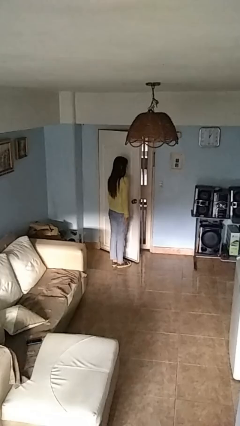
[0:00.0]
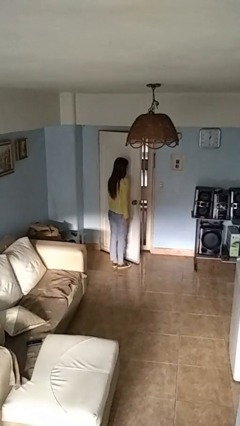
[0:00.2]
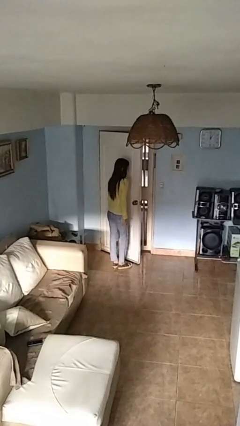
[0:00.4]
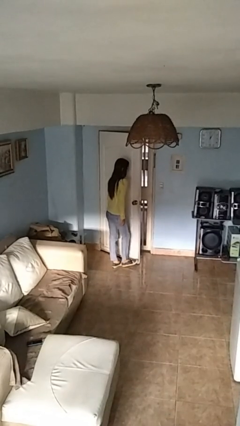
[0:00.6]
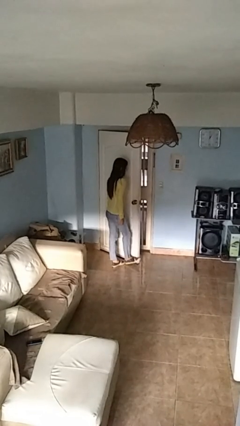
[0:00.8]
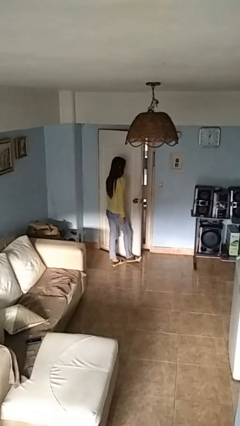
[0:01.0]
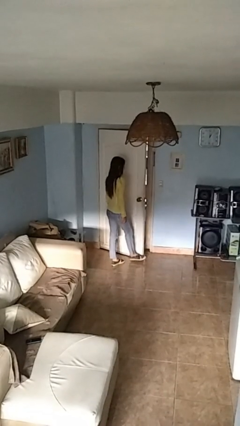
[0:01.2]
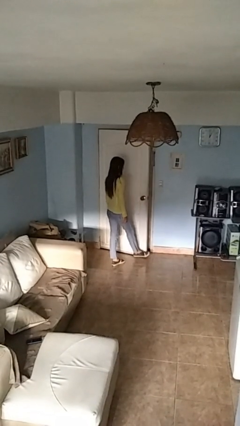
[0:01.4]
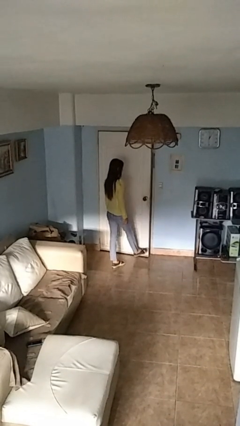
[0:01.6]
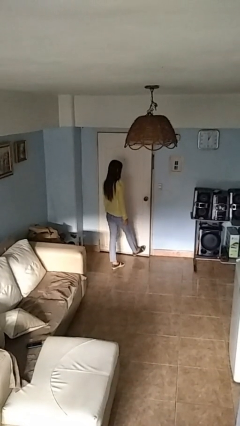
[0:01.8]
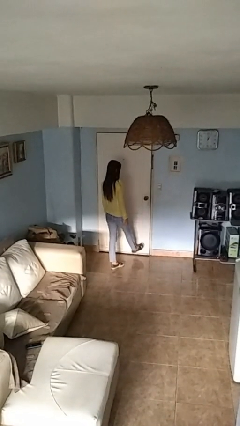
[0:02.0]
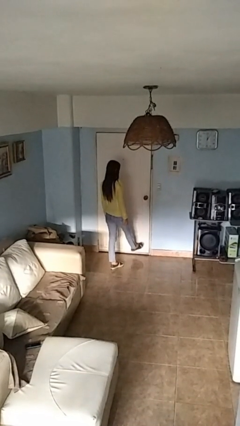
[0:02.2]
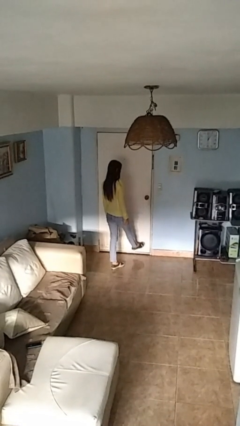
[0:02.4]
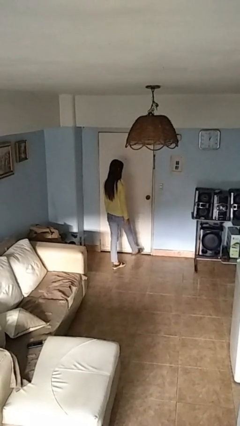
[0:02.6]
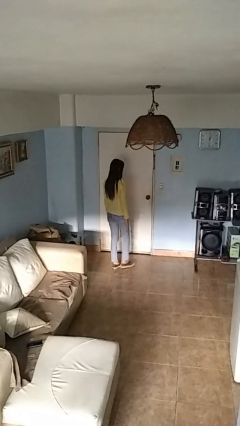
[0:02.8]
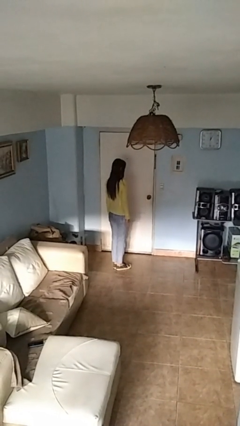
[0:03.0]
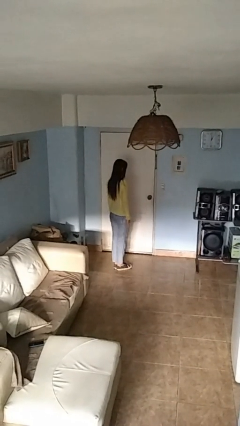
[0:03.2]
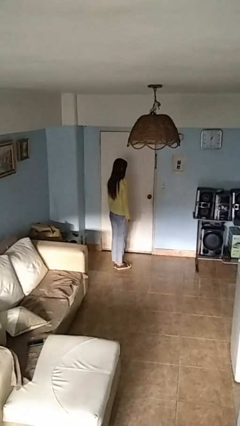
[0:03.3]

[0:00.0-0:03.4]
person closes door with foot

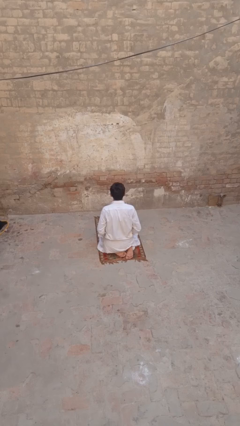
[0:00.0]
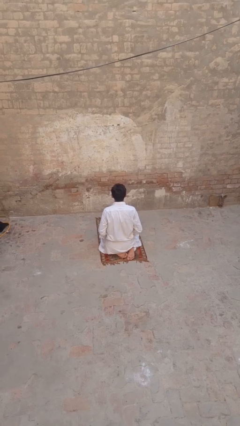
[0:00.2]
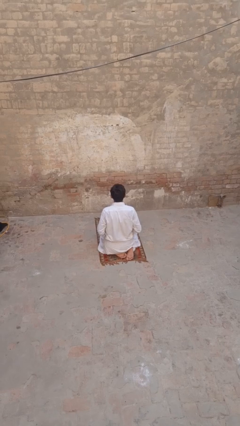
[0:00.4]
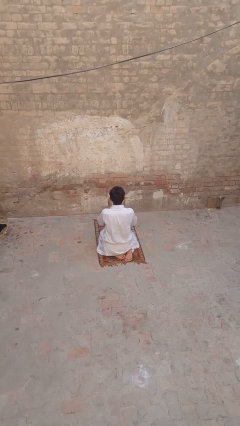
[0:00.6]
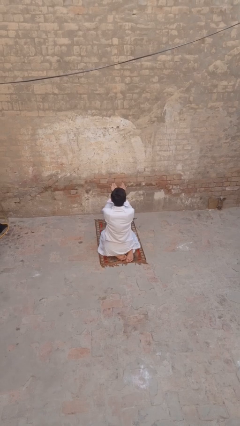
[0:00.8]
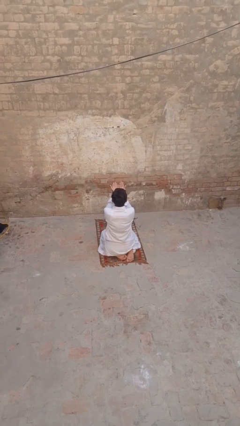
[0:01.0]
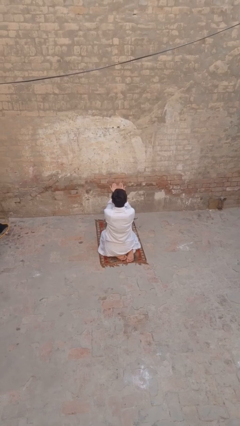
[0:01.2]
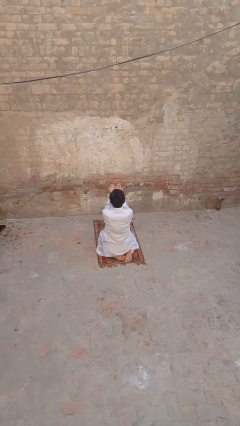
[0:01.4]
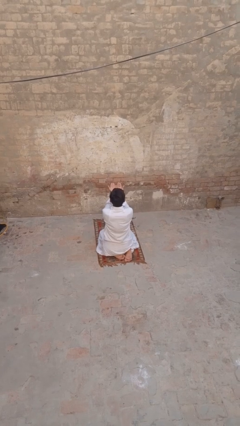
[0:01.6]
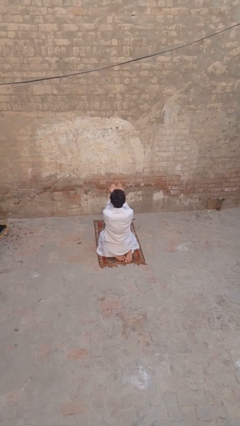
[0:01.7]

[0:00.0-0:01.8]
person prays

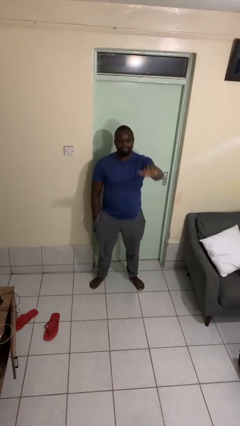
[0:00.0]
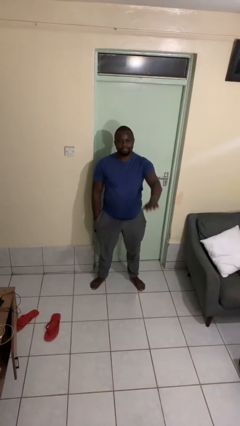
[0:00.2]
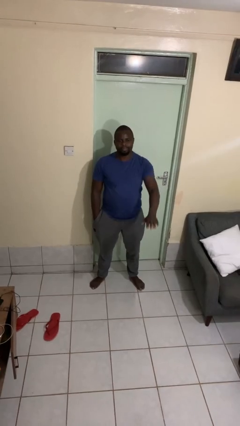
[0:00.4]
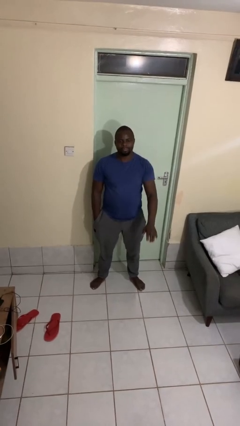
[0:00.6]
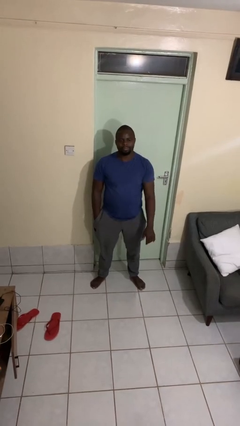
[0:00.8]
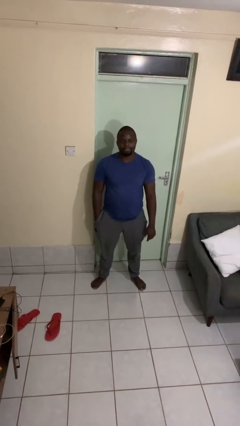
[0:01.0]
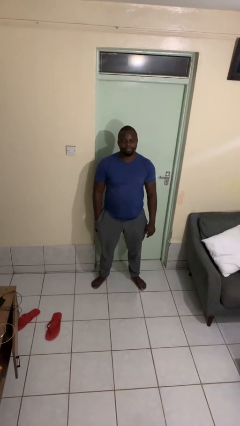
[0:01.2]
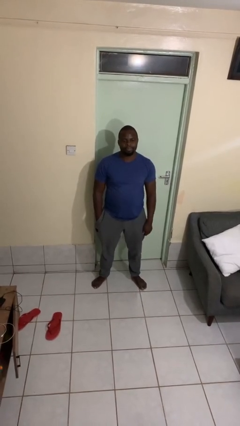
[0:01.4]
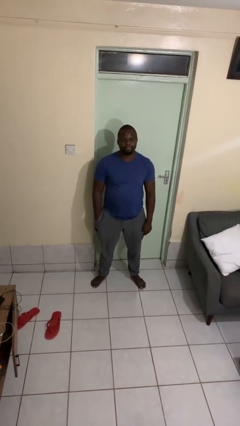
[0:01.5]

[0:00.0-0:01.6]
person gestures swipe down

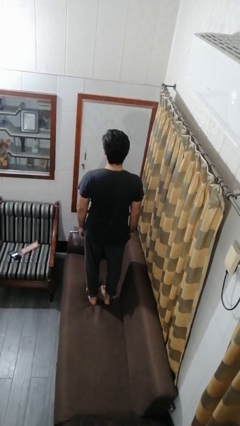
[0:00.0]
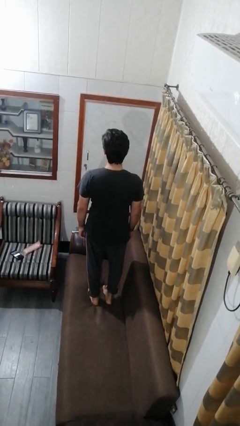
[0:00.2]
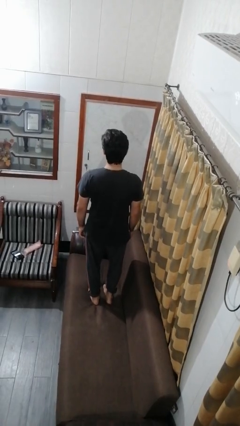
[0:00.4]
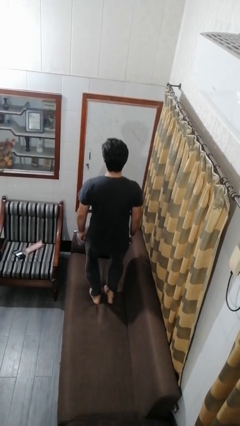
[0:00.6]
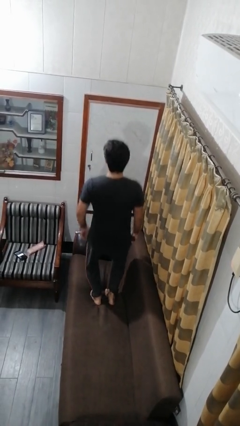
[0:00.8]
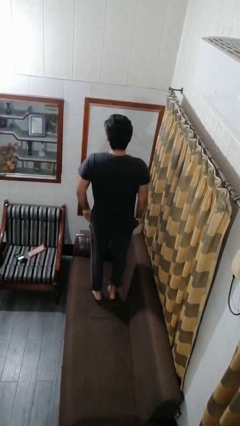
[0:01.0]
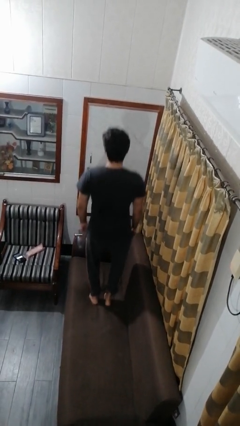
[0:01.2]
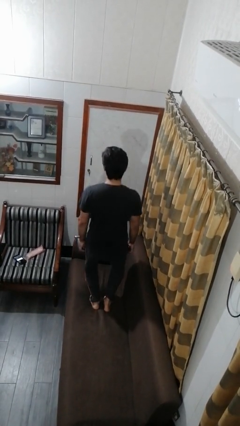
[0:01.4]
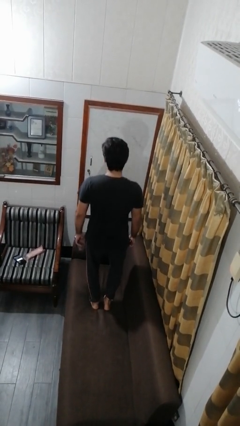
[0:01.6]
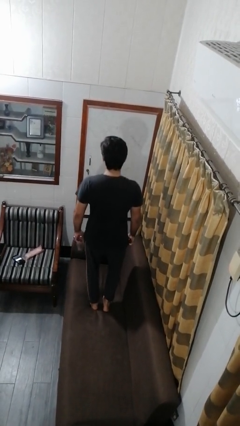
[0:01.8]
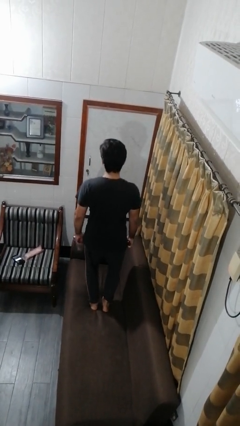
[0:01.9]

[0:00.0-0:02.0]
person jumps on couch

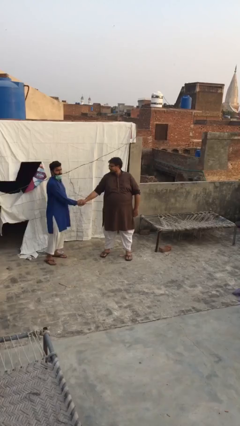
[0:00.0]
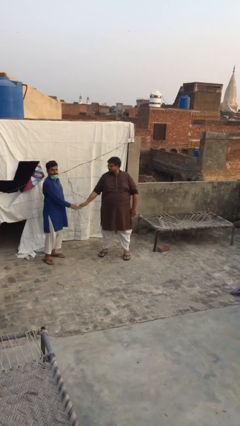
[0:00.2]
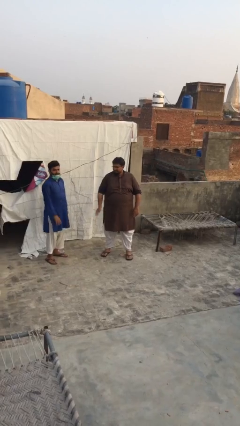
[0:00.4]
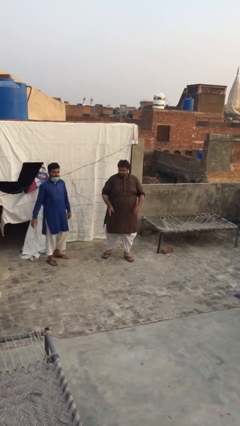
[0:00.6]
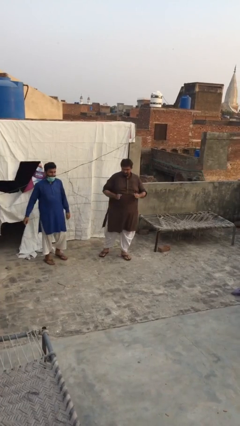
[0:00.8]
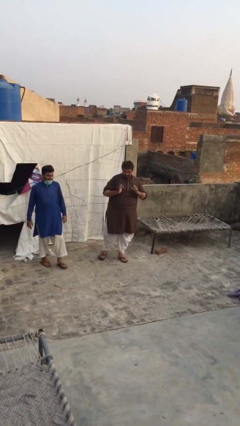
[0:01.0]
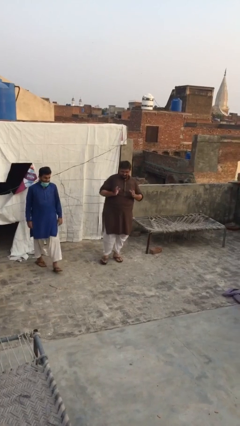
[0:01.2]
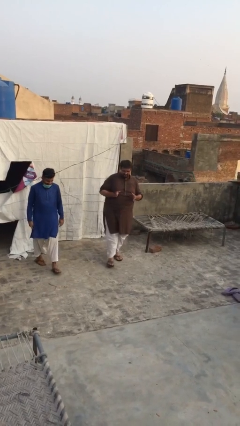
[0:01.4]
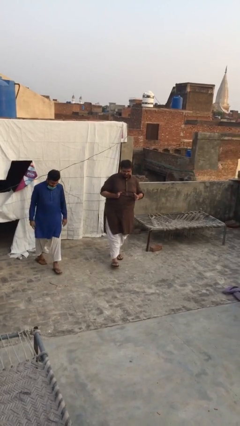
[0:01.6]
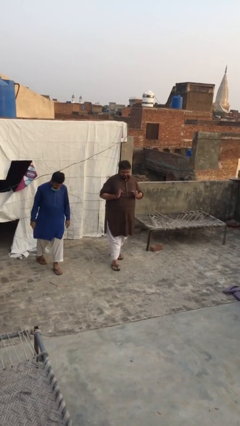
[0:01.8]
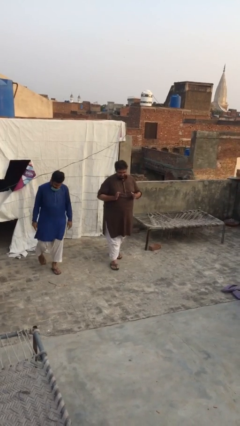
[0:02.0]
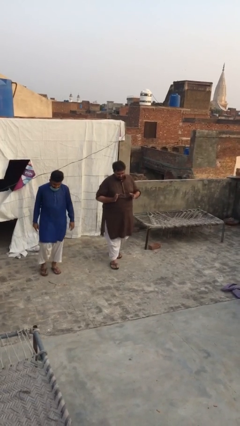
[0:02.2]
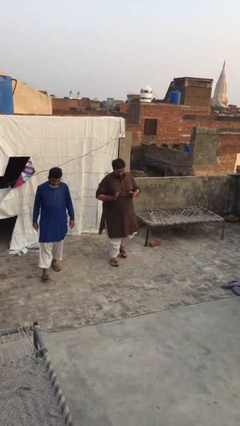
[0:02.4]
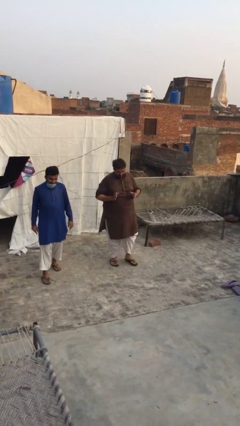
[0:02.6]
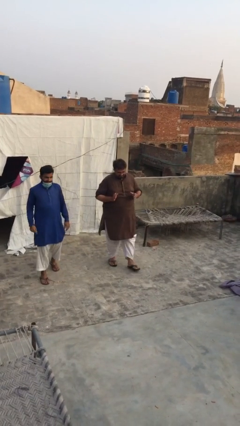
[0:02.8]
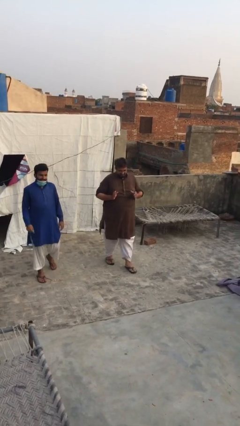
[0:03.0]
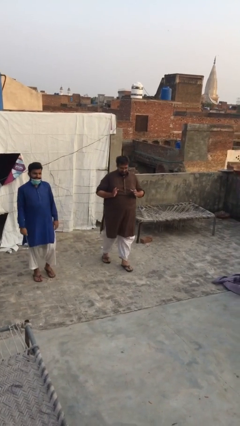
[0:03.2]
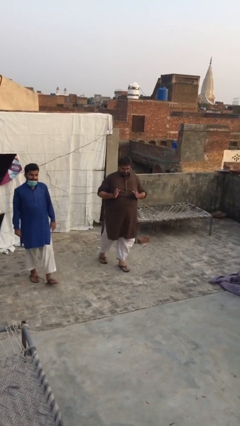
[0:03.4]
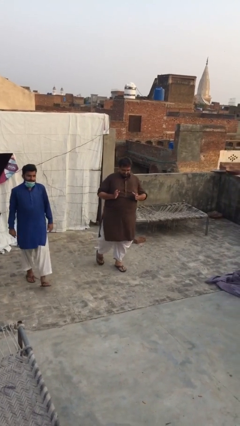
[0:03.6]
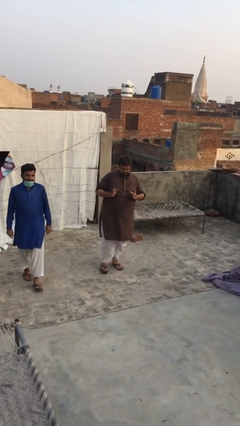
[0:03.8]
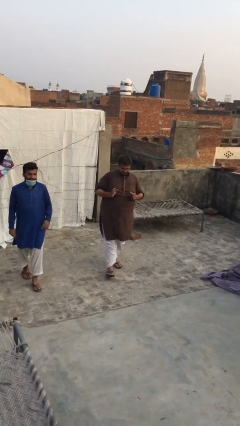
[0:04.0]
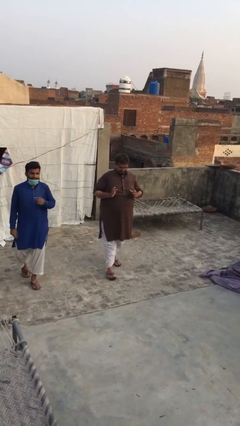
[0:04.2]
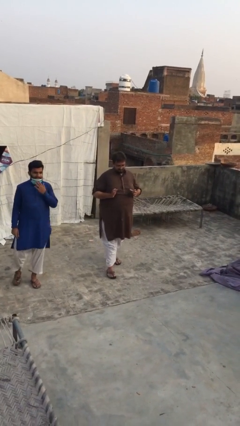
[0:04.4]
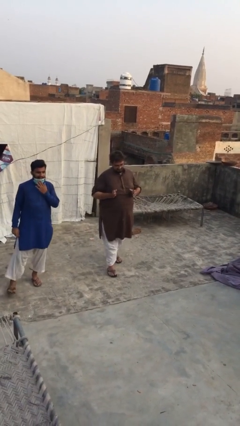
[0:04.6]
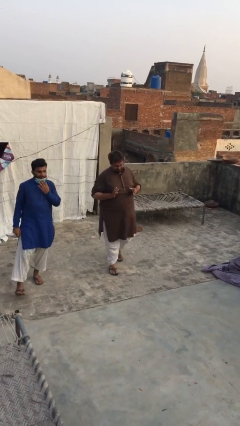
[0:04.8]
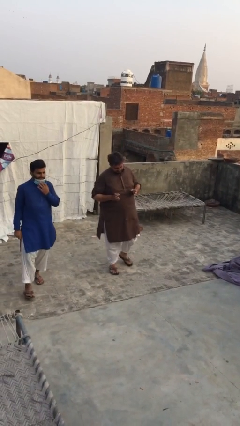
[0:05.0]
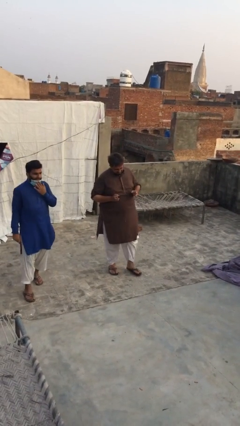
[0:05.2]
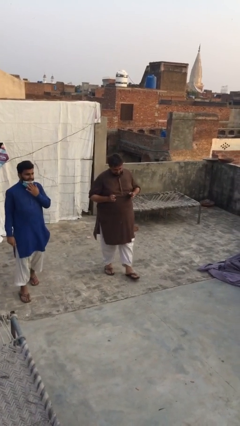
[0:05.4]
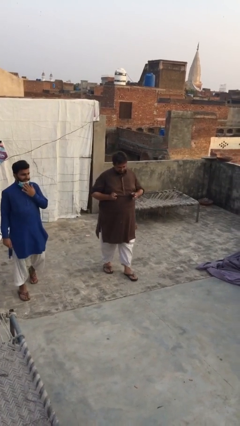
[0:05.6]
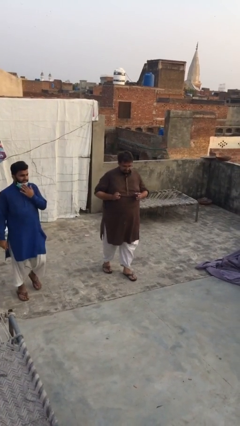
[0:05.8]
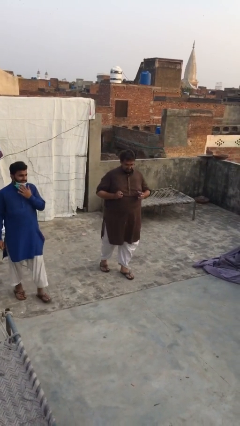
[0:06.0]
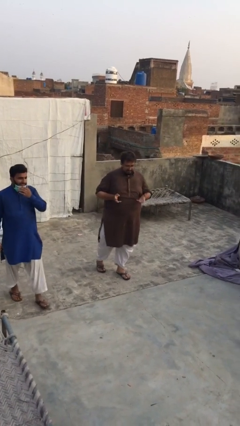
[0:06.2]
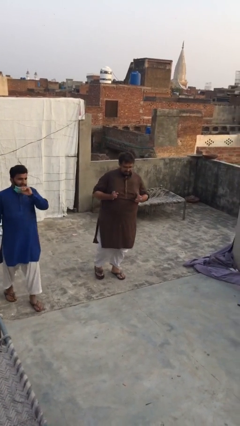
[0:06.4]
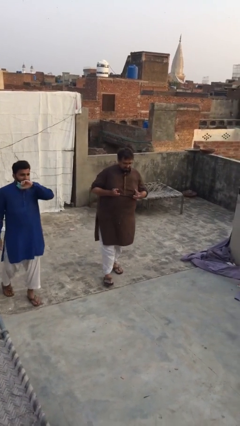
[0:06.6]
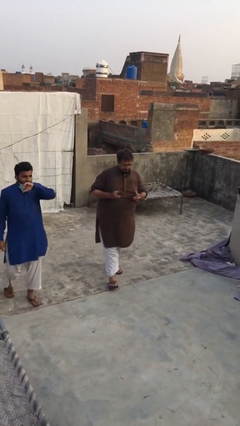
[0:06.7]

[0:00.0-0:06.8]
person talks to person

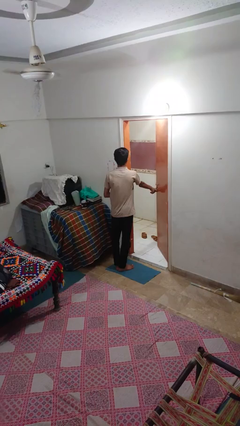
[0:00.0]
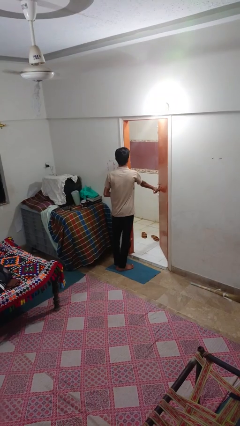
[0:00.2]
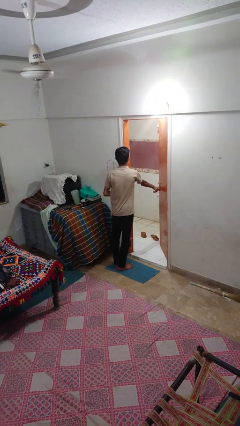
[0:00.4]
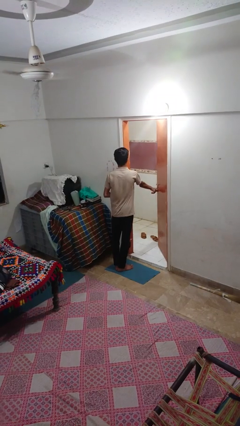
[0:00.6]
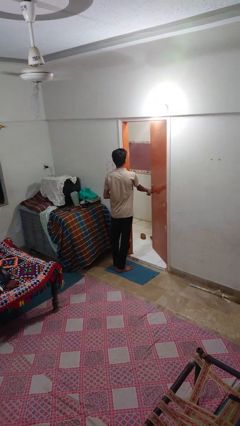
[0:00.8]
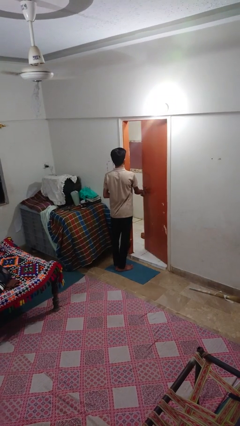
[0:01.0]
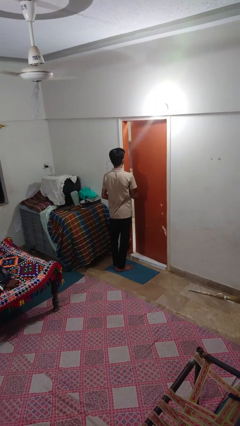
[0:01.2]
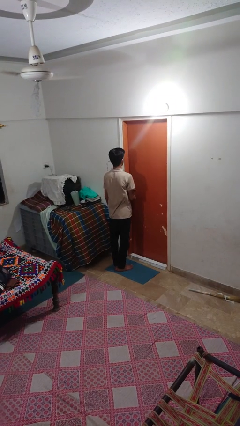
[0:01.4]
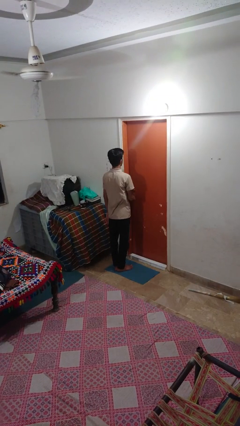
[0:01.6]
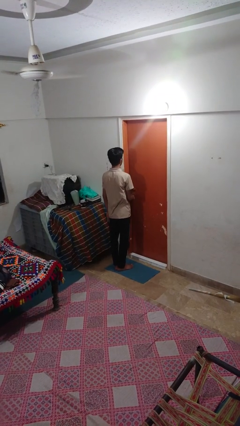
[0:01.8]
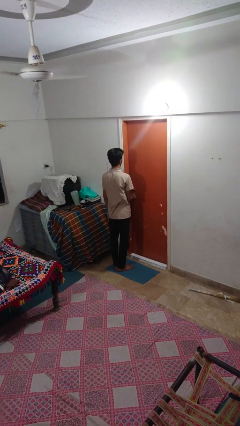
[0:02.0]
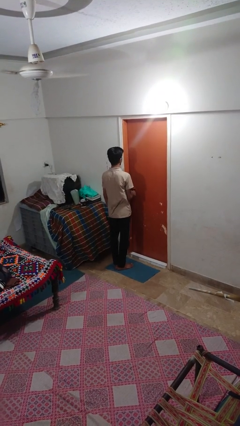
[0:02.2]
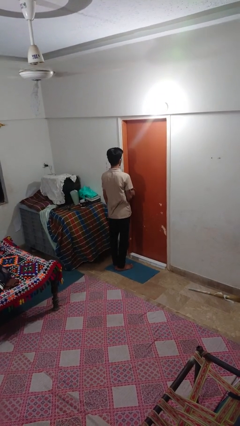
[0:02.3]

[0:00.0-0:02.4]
person closes facility door
